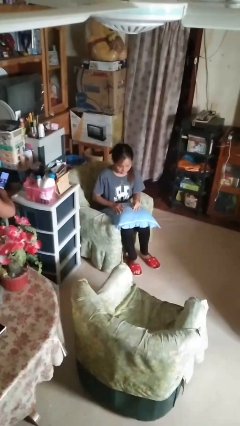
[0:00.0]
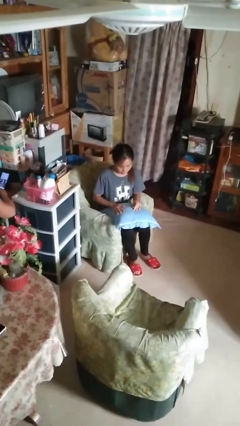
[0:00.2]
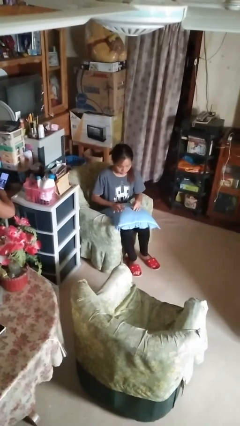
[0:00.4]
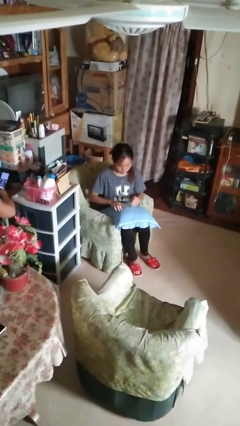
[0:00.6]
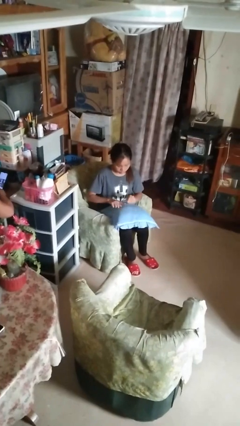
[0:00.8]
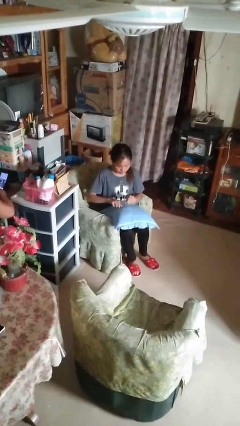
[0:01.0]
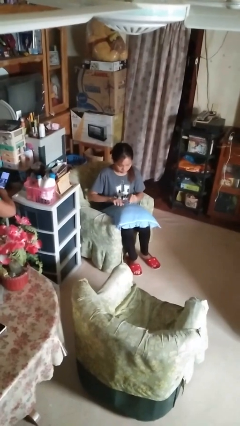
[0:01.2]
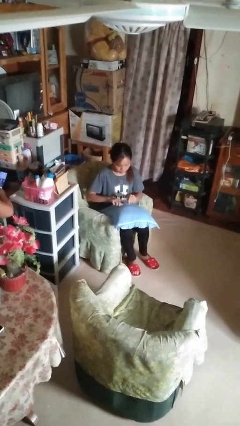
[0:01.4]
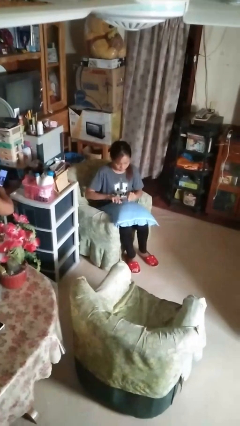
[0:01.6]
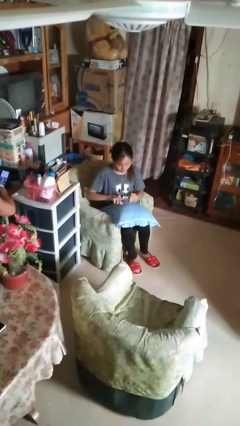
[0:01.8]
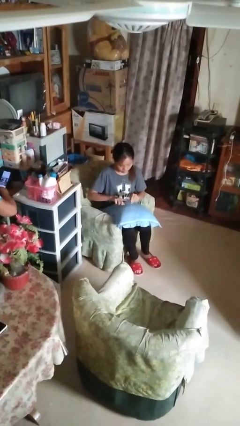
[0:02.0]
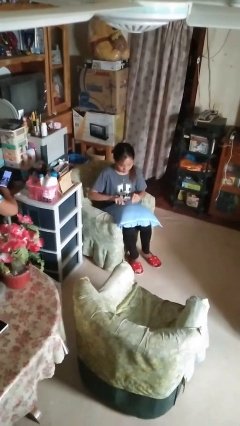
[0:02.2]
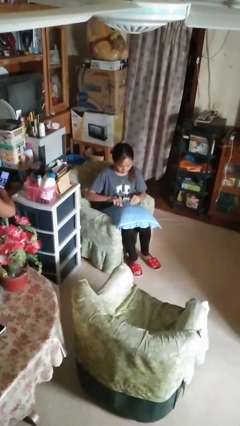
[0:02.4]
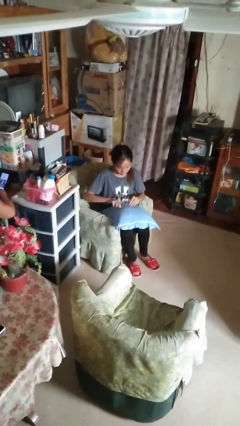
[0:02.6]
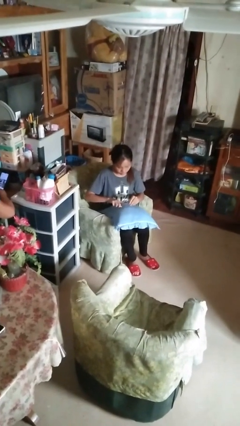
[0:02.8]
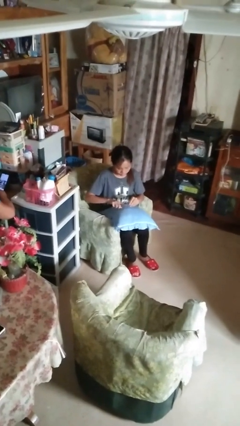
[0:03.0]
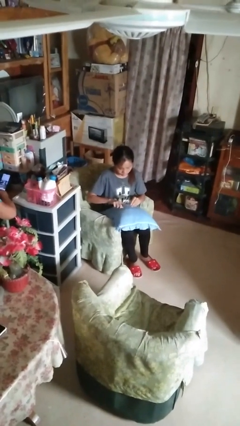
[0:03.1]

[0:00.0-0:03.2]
person files fingernails

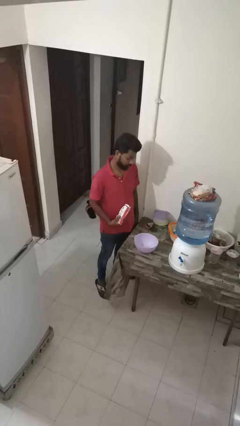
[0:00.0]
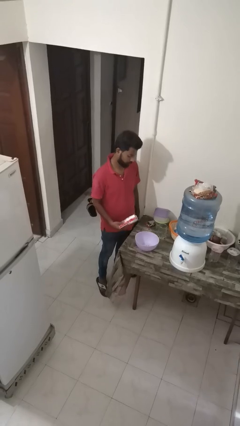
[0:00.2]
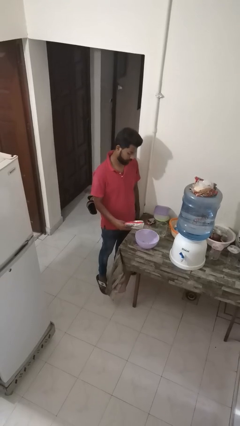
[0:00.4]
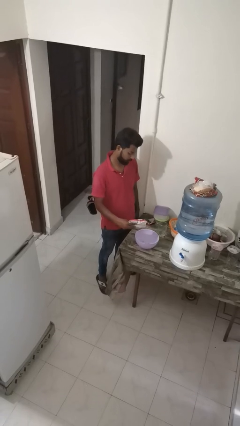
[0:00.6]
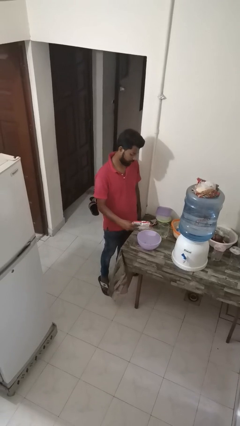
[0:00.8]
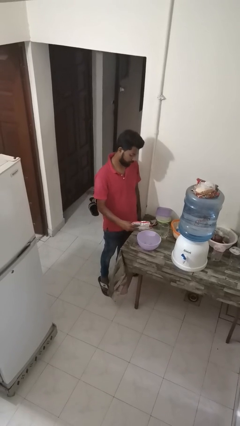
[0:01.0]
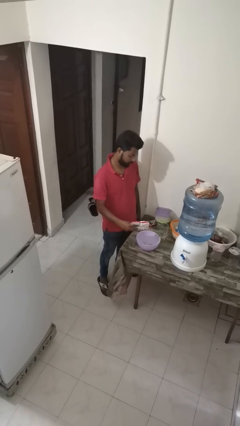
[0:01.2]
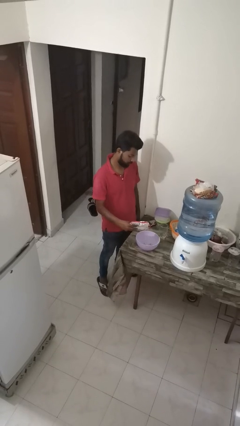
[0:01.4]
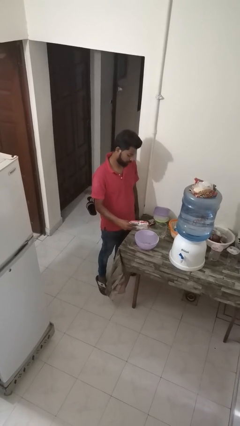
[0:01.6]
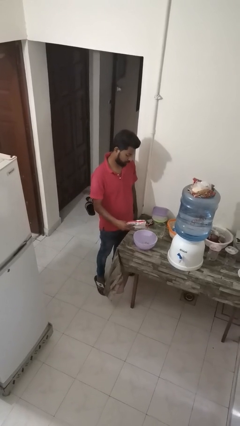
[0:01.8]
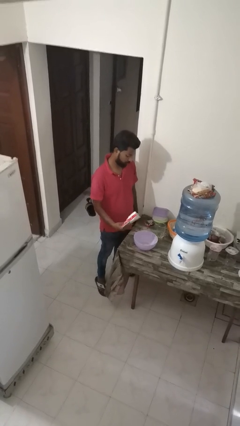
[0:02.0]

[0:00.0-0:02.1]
person pours into bowl

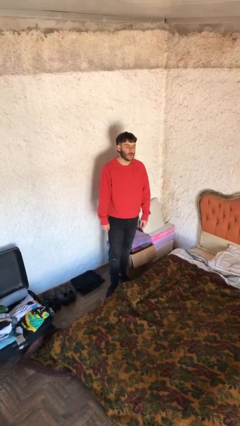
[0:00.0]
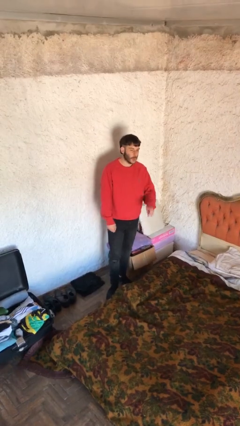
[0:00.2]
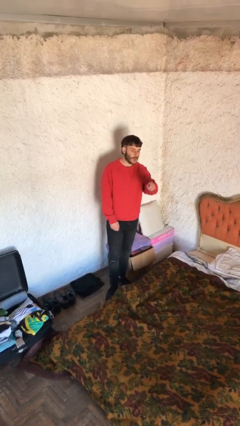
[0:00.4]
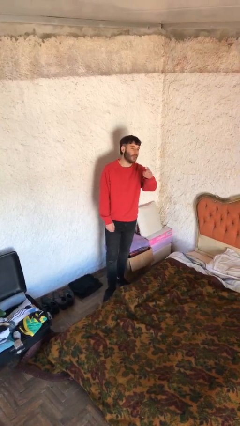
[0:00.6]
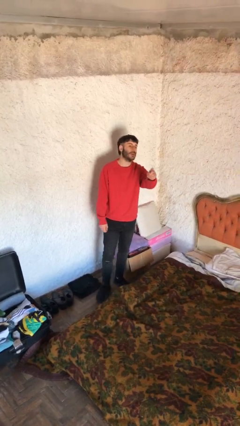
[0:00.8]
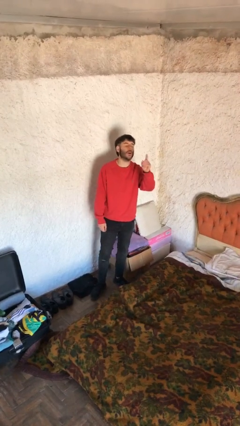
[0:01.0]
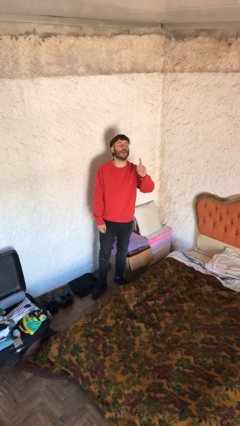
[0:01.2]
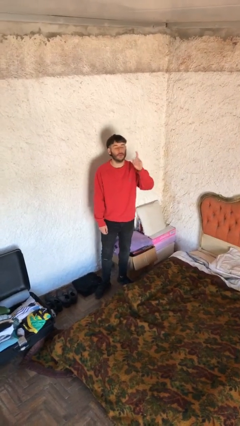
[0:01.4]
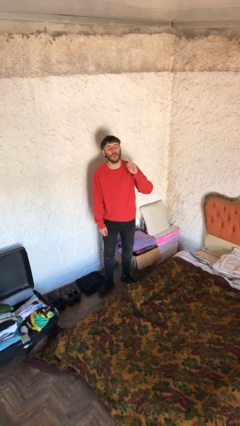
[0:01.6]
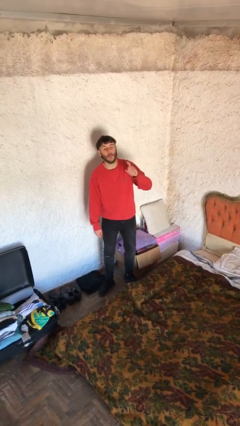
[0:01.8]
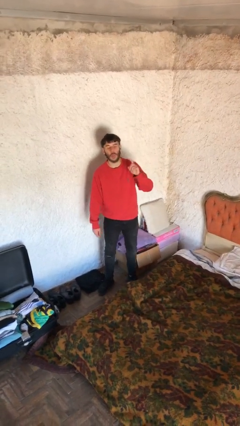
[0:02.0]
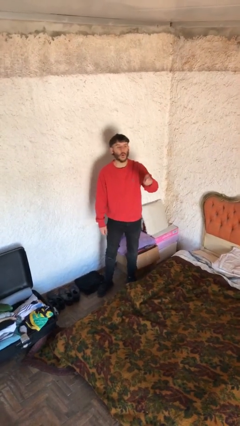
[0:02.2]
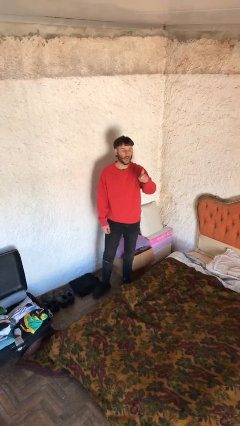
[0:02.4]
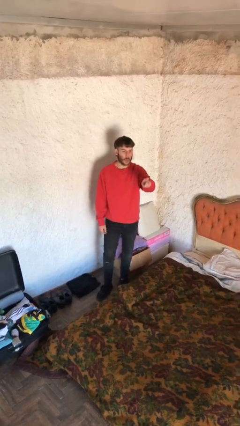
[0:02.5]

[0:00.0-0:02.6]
person points at person

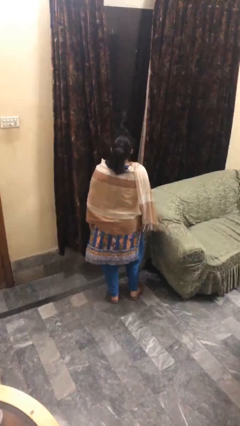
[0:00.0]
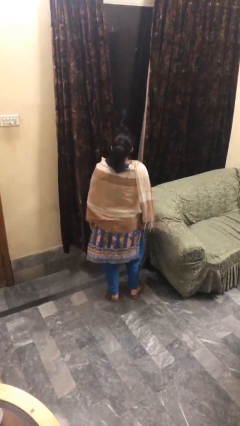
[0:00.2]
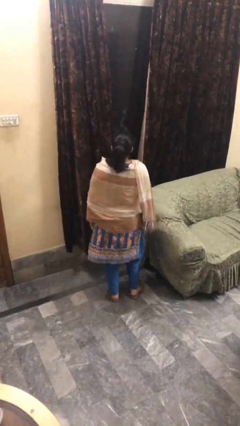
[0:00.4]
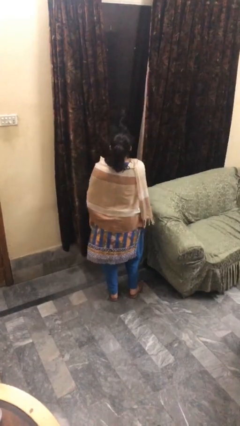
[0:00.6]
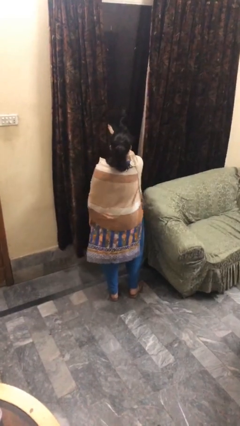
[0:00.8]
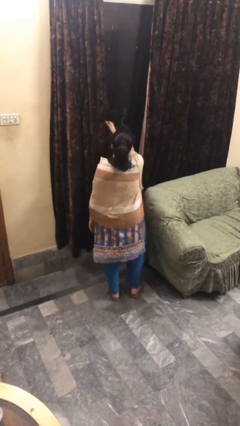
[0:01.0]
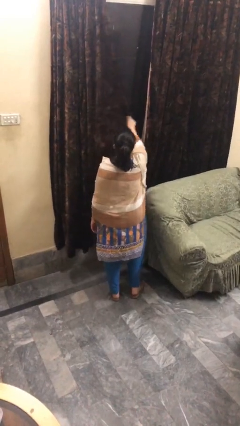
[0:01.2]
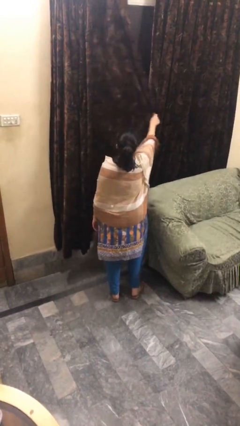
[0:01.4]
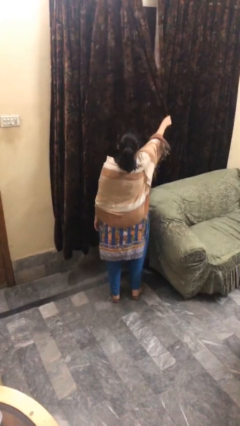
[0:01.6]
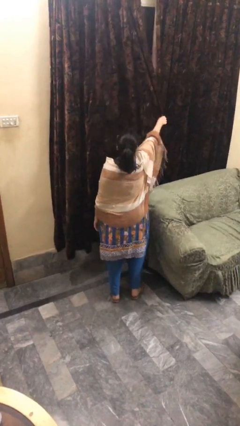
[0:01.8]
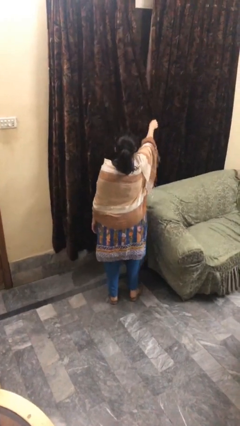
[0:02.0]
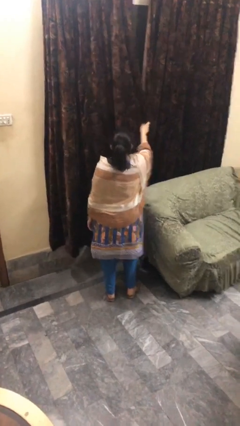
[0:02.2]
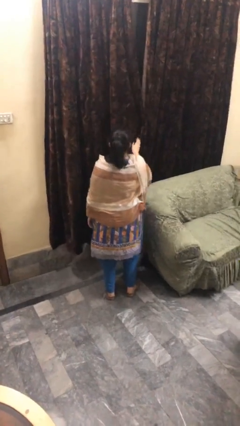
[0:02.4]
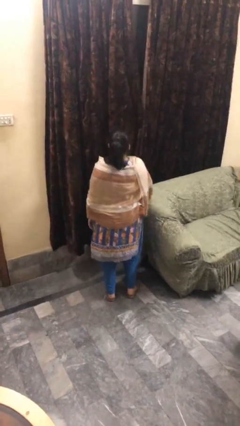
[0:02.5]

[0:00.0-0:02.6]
person closes curtains

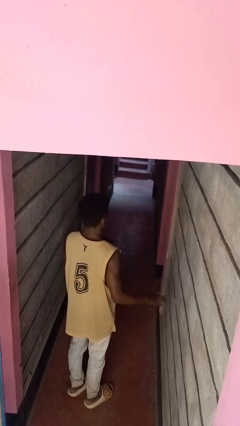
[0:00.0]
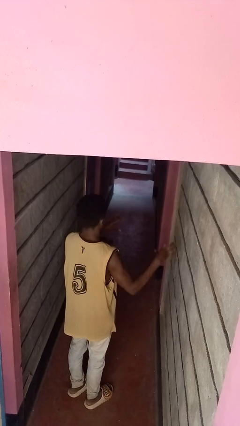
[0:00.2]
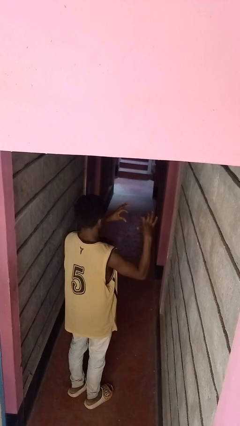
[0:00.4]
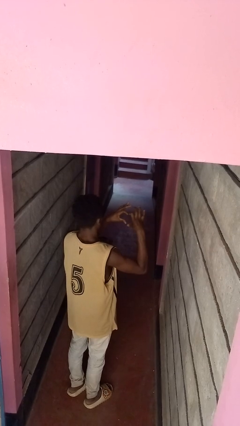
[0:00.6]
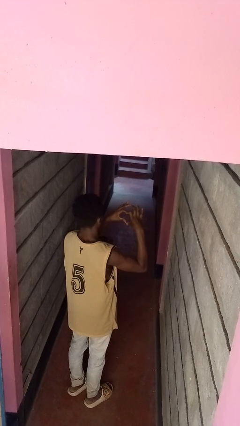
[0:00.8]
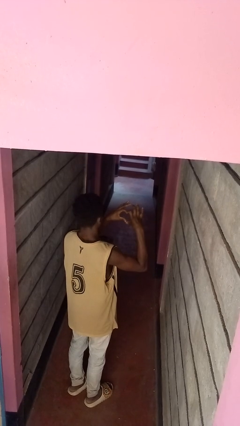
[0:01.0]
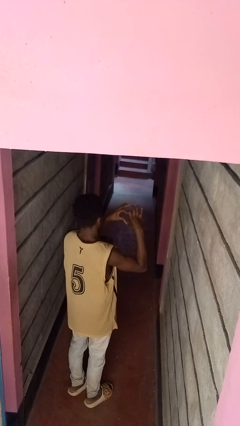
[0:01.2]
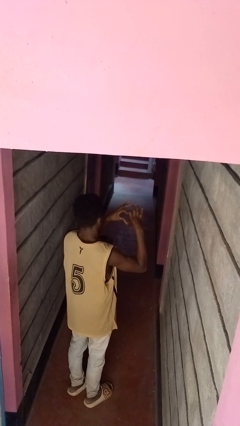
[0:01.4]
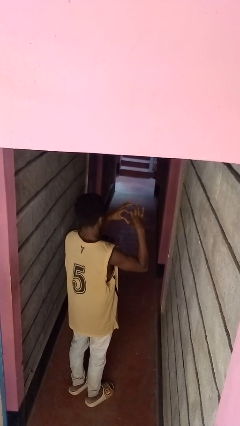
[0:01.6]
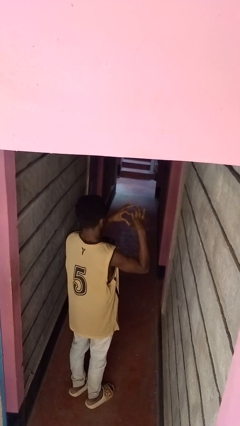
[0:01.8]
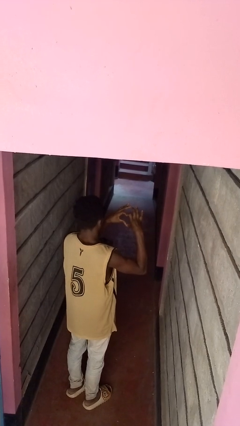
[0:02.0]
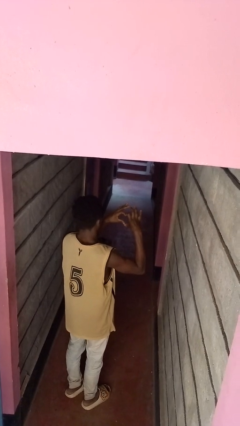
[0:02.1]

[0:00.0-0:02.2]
person gestures heart

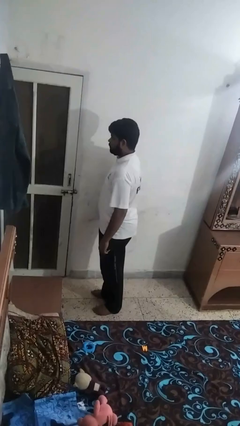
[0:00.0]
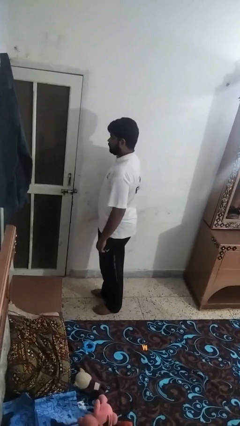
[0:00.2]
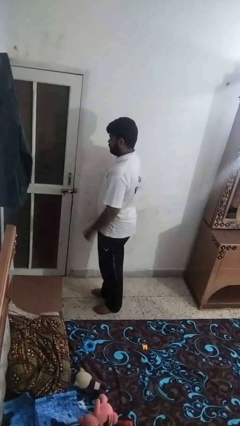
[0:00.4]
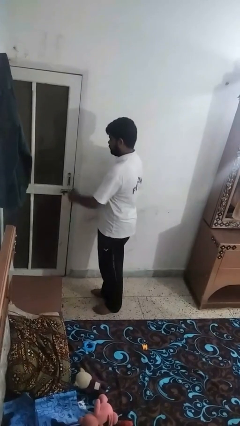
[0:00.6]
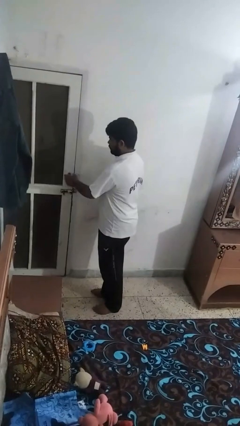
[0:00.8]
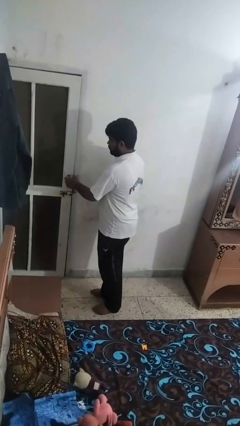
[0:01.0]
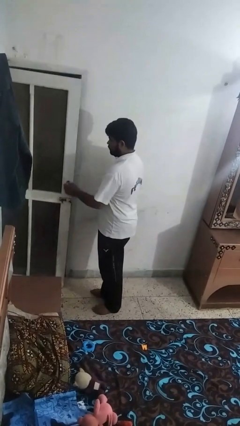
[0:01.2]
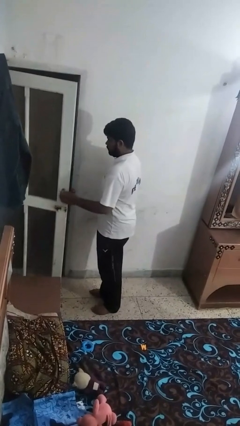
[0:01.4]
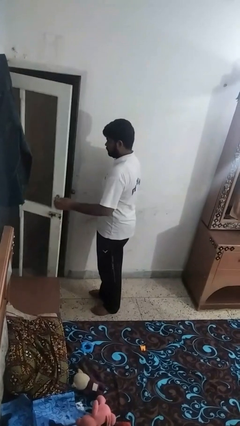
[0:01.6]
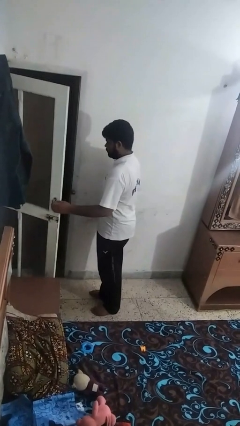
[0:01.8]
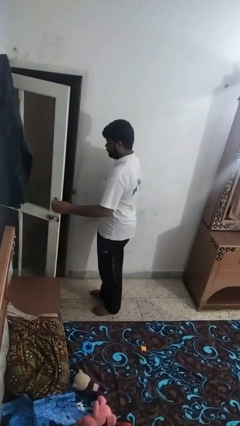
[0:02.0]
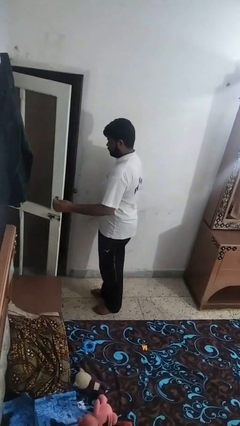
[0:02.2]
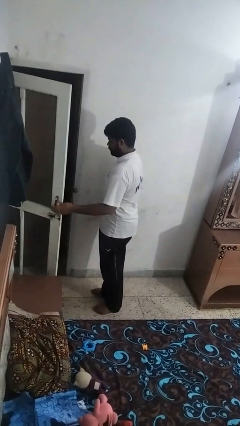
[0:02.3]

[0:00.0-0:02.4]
person opens facility door

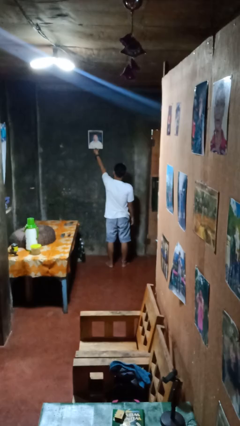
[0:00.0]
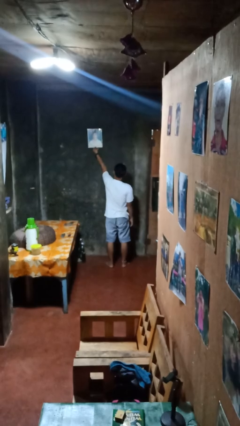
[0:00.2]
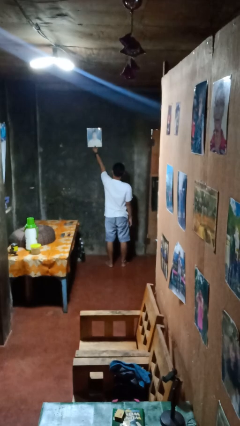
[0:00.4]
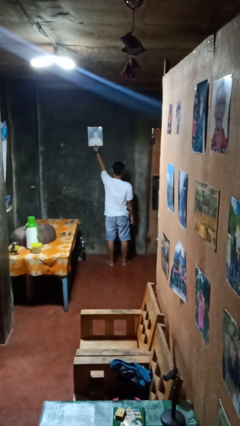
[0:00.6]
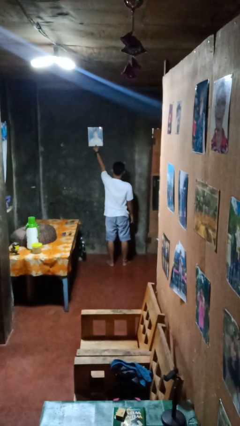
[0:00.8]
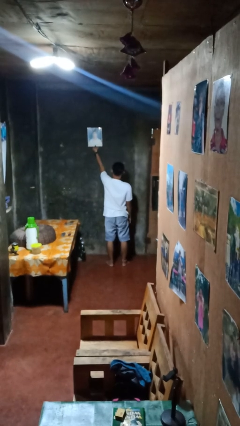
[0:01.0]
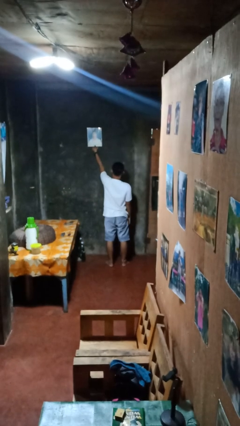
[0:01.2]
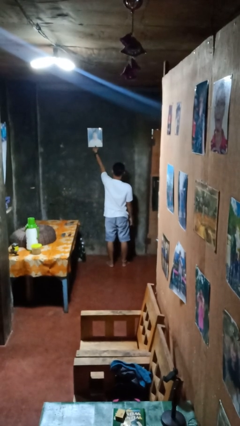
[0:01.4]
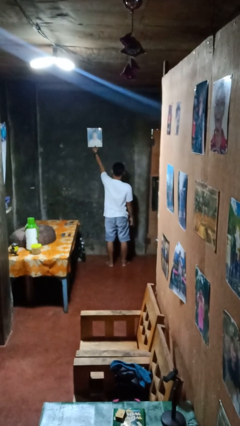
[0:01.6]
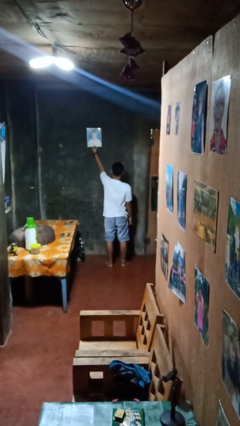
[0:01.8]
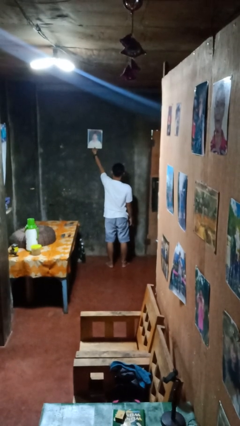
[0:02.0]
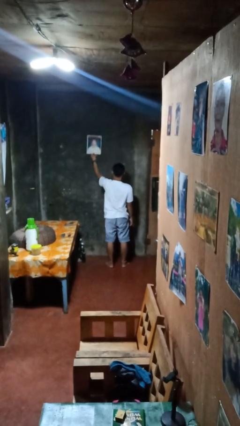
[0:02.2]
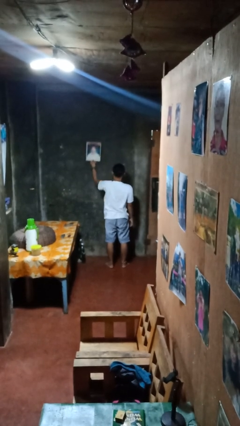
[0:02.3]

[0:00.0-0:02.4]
person puts up picture frame

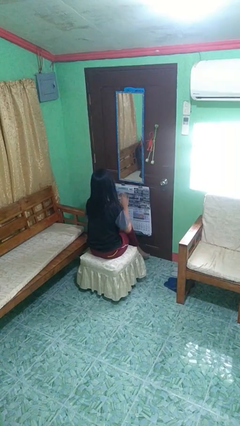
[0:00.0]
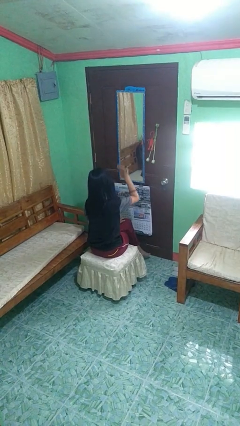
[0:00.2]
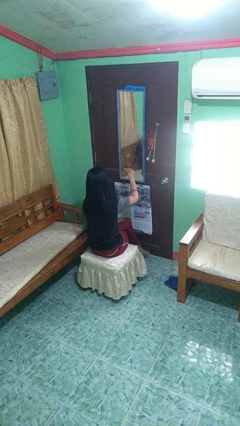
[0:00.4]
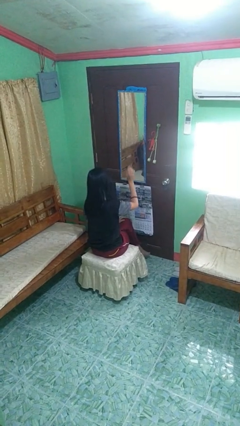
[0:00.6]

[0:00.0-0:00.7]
person gestures come here